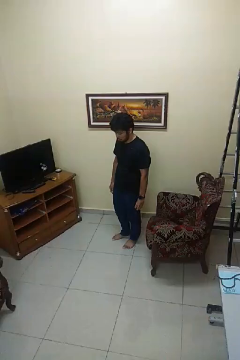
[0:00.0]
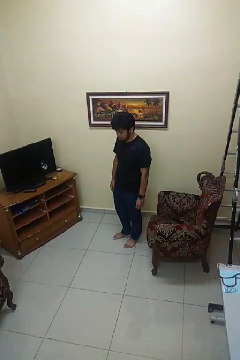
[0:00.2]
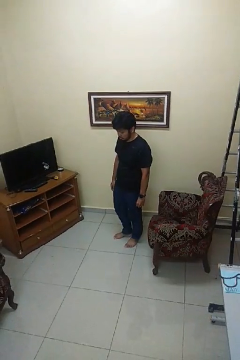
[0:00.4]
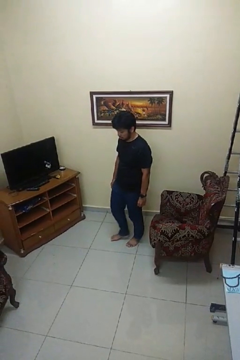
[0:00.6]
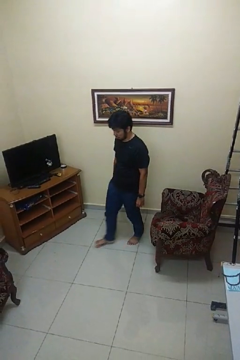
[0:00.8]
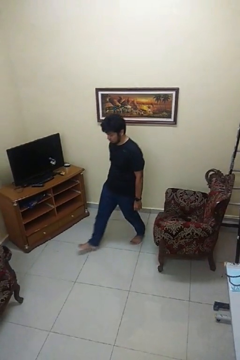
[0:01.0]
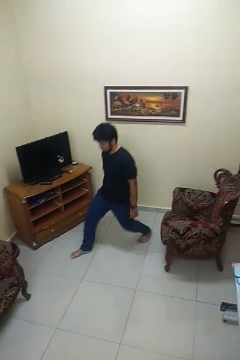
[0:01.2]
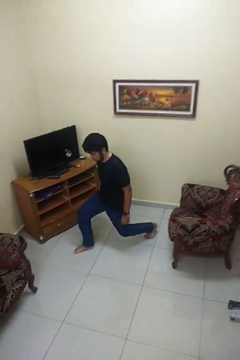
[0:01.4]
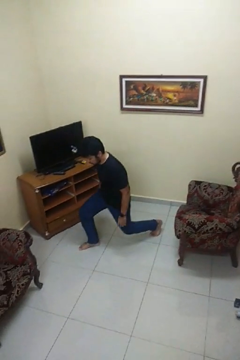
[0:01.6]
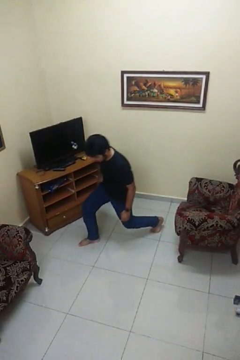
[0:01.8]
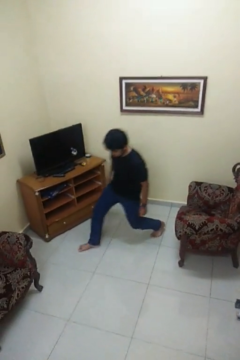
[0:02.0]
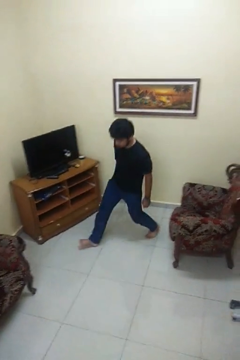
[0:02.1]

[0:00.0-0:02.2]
person exercises with lunges

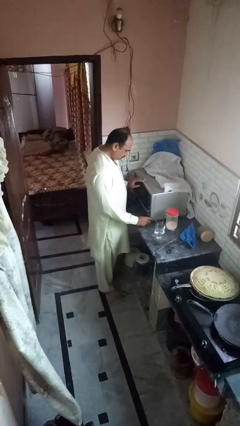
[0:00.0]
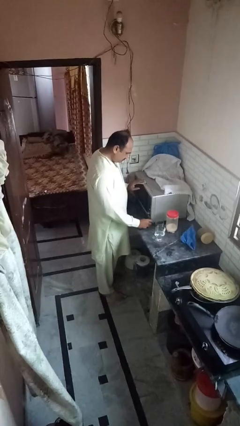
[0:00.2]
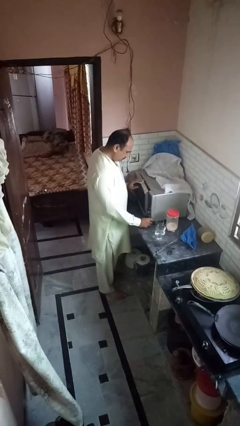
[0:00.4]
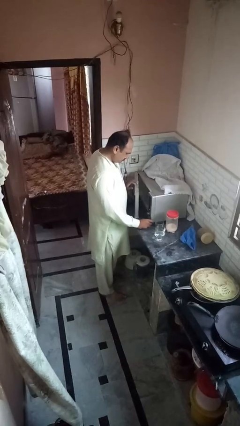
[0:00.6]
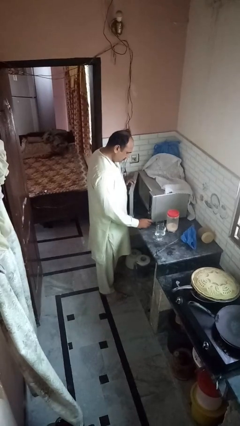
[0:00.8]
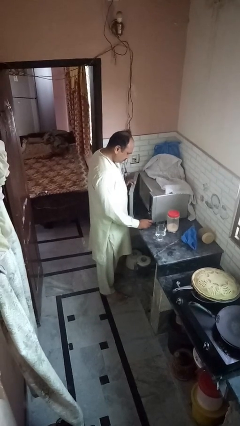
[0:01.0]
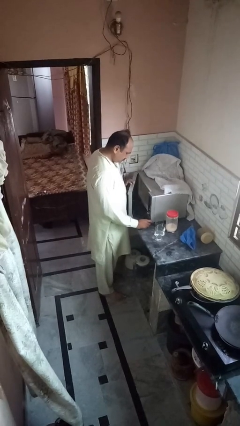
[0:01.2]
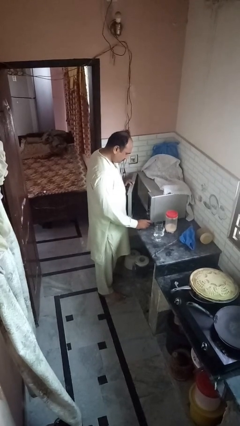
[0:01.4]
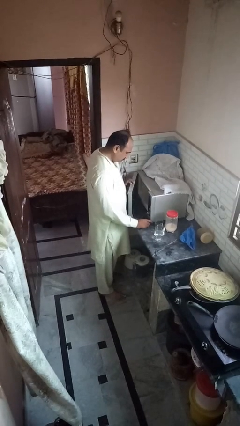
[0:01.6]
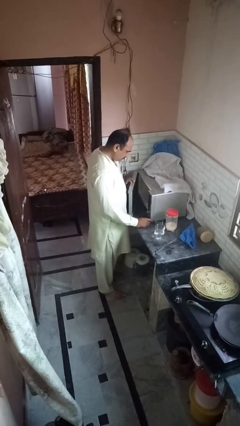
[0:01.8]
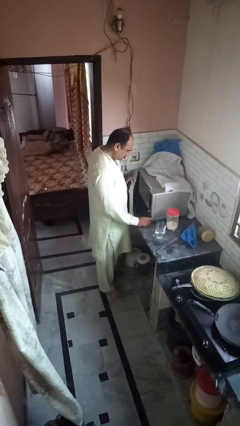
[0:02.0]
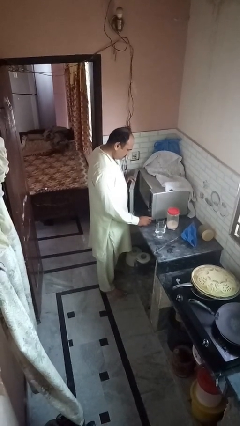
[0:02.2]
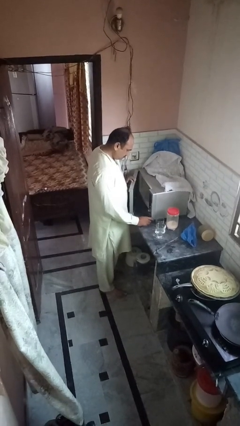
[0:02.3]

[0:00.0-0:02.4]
person opens microwave

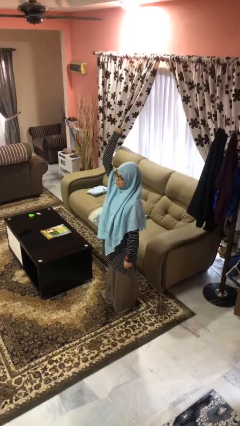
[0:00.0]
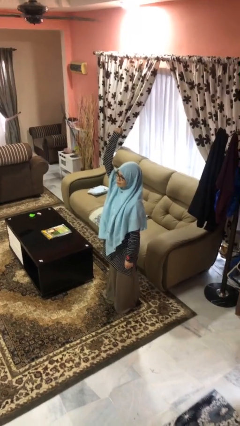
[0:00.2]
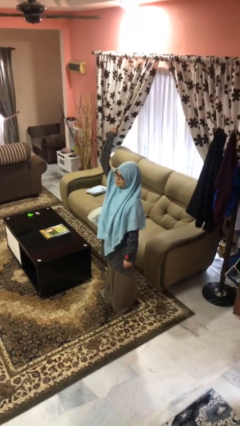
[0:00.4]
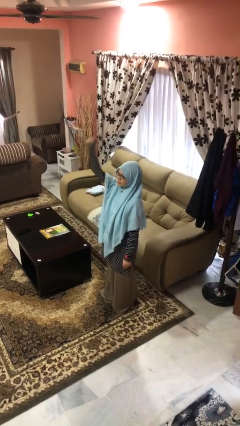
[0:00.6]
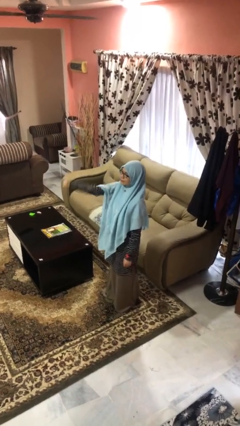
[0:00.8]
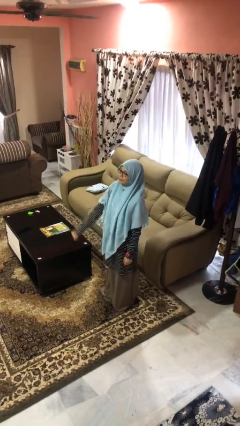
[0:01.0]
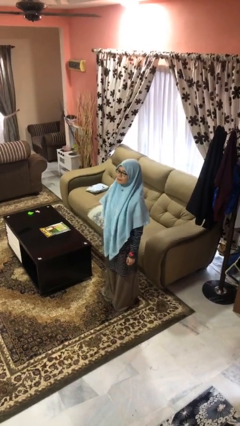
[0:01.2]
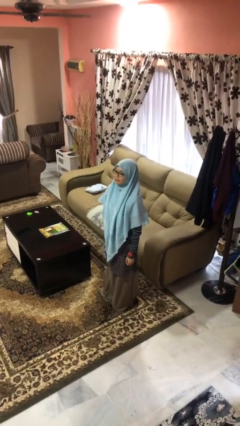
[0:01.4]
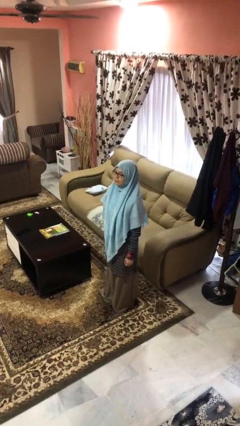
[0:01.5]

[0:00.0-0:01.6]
person gestures lower hand

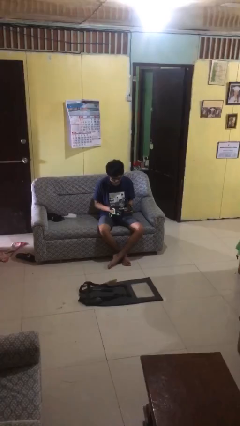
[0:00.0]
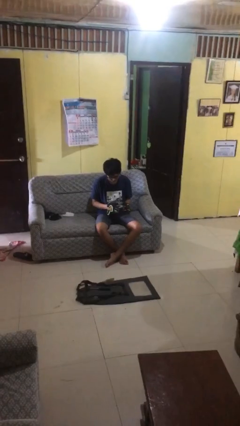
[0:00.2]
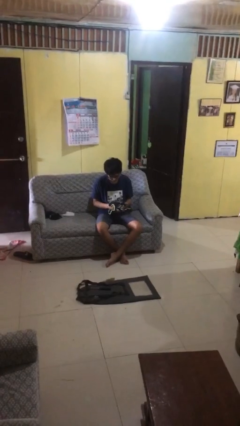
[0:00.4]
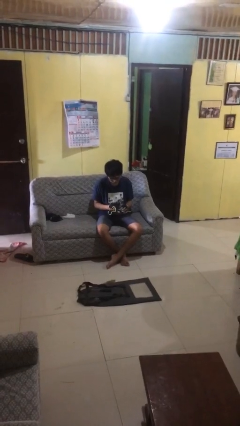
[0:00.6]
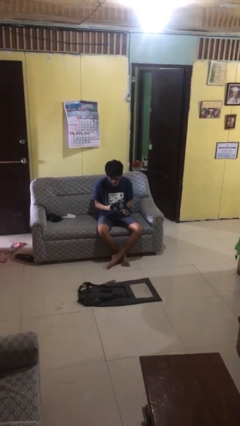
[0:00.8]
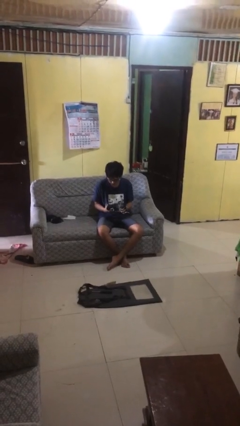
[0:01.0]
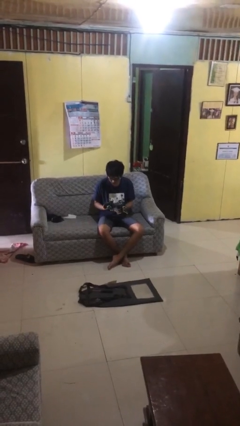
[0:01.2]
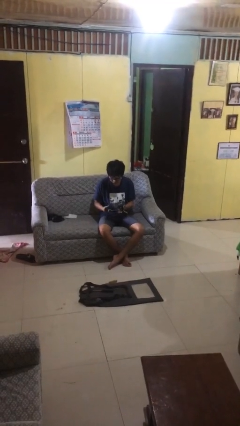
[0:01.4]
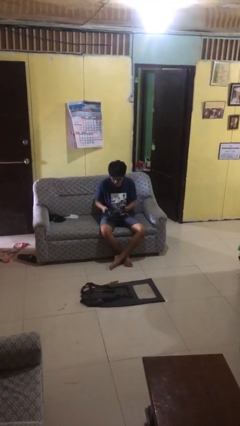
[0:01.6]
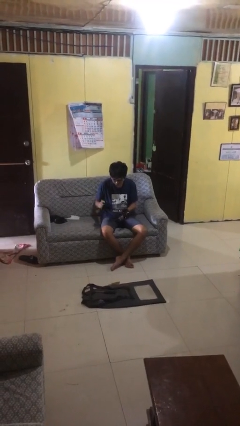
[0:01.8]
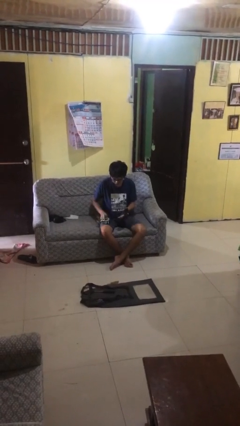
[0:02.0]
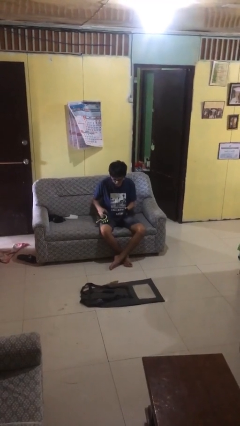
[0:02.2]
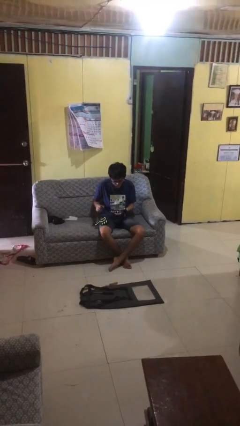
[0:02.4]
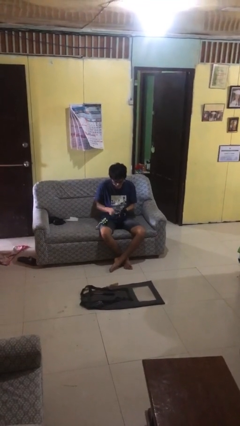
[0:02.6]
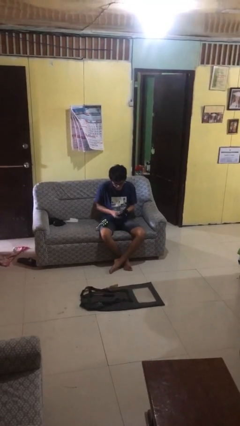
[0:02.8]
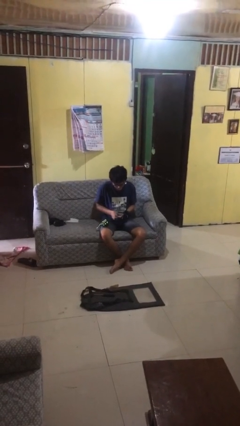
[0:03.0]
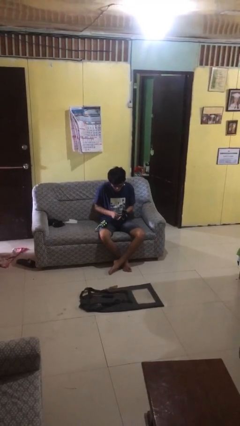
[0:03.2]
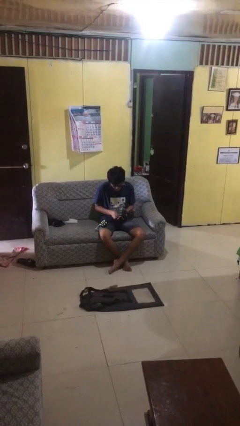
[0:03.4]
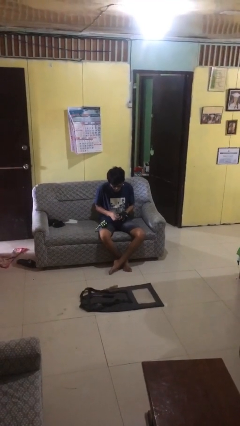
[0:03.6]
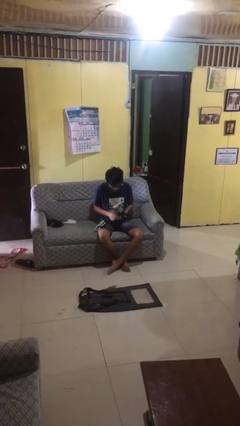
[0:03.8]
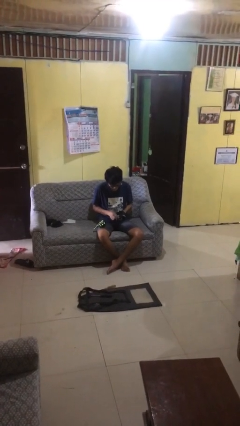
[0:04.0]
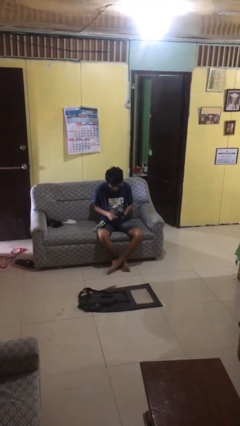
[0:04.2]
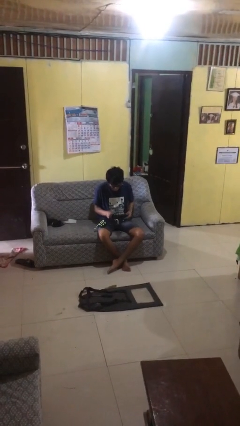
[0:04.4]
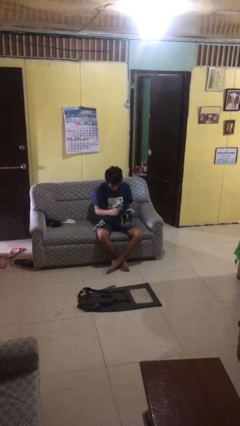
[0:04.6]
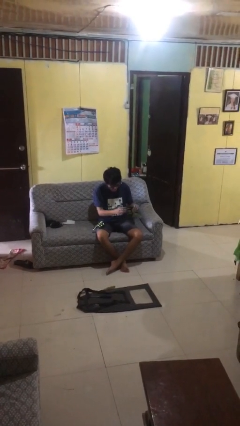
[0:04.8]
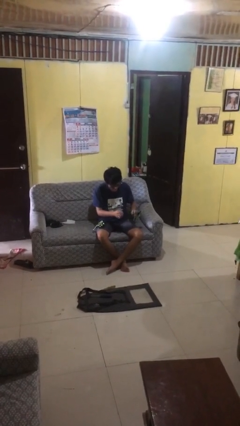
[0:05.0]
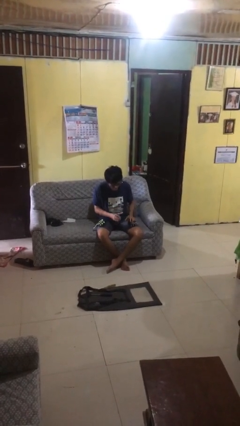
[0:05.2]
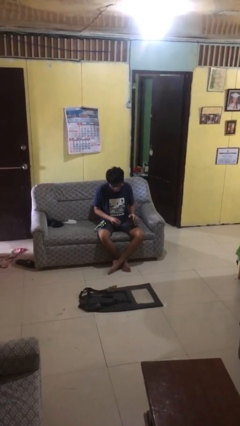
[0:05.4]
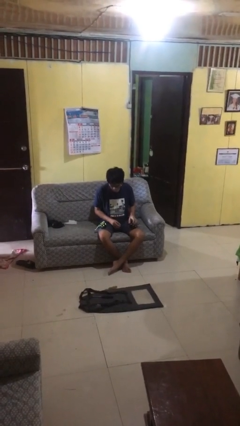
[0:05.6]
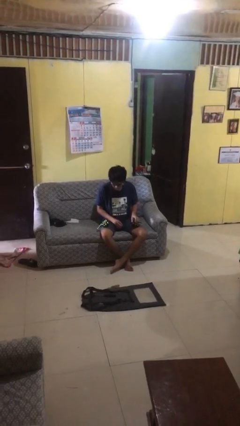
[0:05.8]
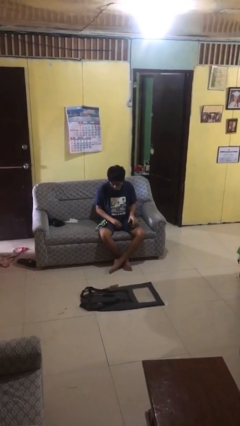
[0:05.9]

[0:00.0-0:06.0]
person takes off gloves

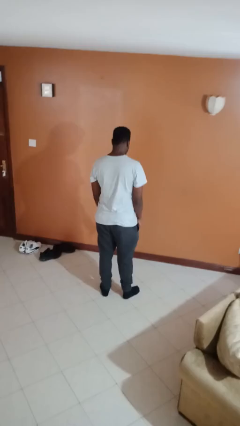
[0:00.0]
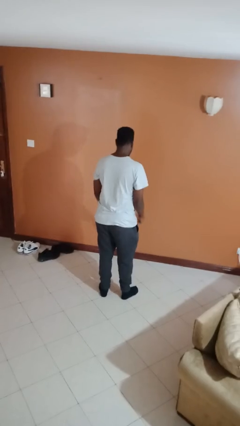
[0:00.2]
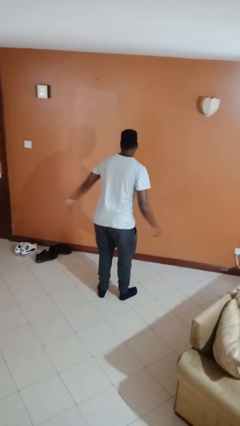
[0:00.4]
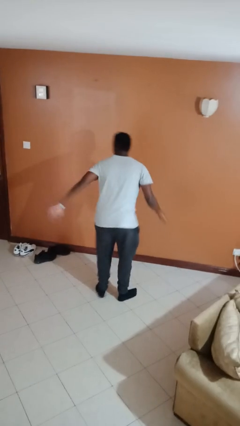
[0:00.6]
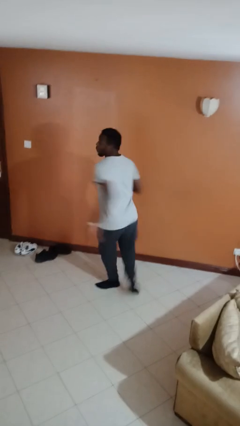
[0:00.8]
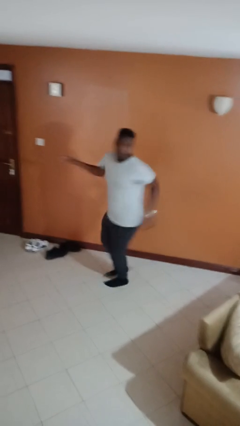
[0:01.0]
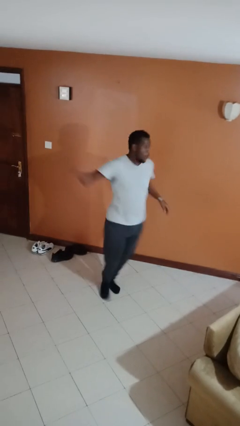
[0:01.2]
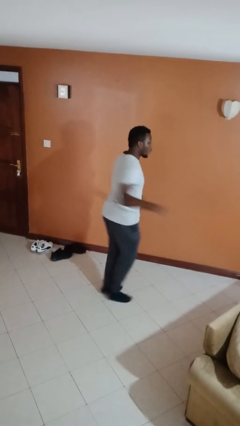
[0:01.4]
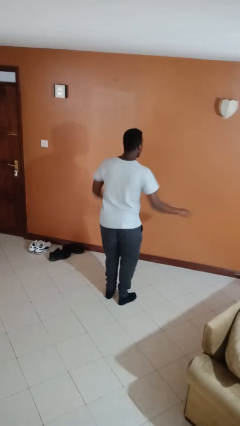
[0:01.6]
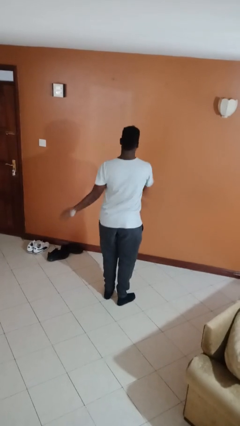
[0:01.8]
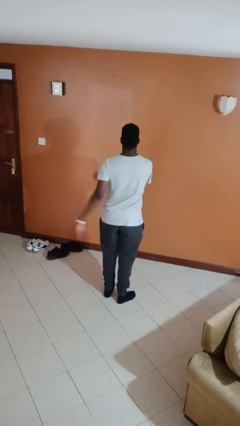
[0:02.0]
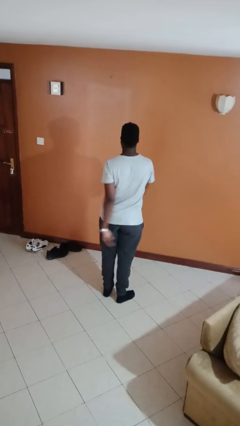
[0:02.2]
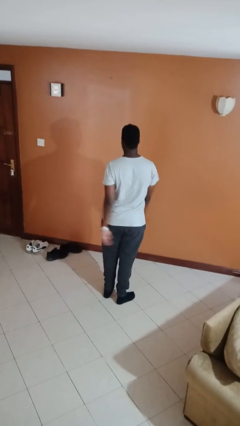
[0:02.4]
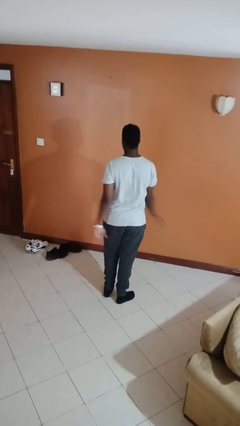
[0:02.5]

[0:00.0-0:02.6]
person twirls

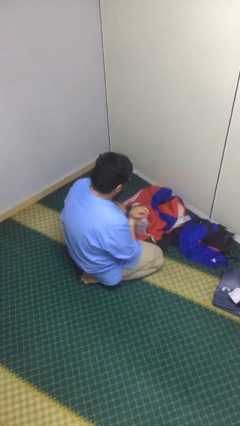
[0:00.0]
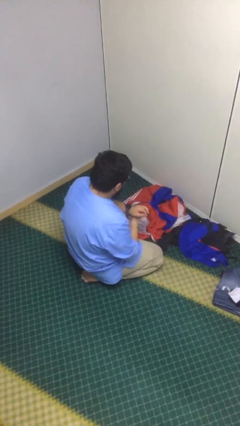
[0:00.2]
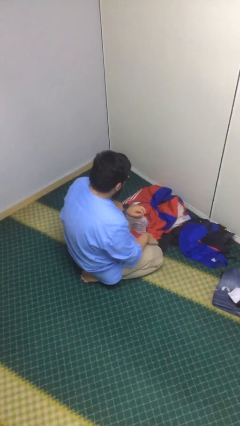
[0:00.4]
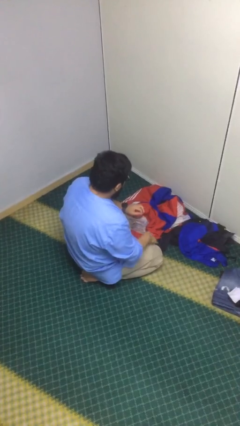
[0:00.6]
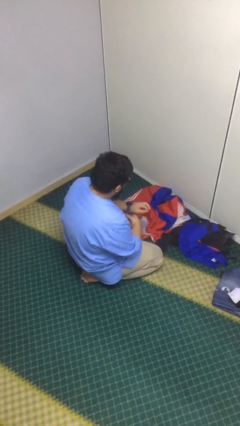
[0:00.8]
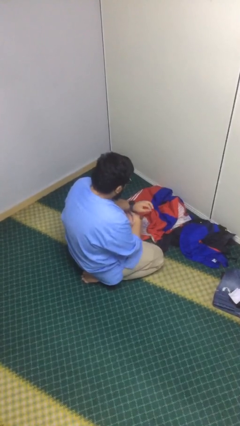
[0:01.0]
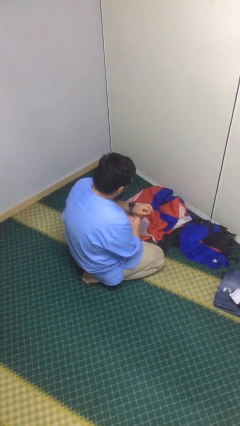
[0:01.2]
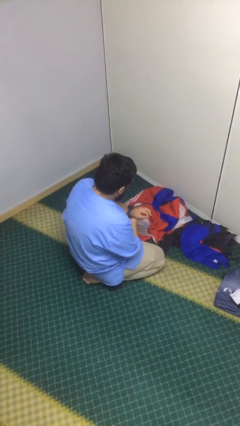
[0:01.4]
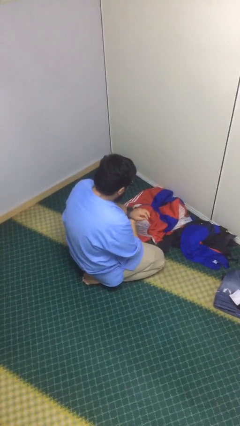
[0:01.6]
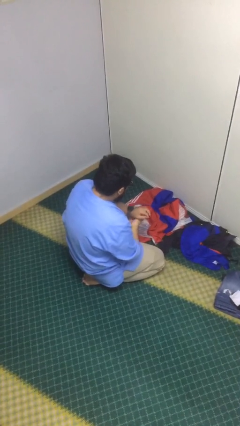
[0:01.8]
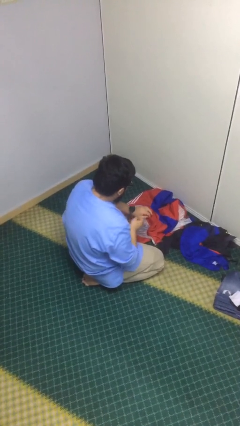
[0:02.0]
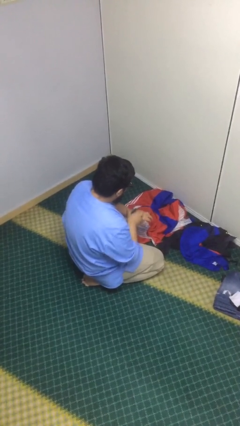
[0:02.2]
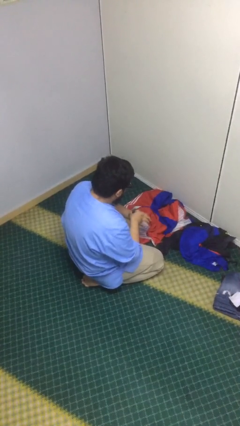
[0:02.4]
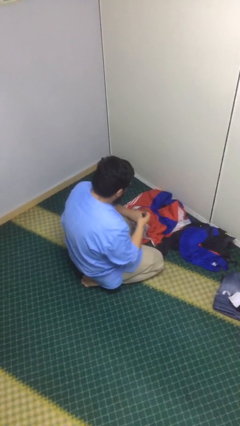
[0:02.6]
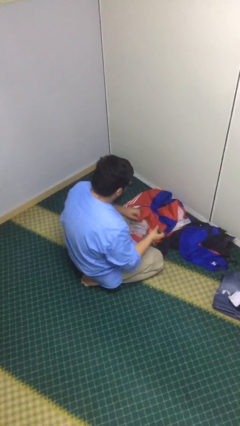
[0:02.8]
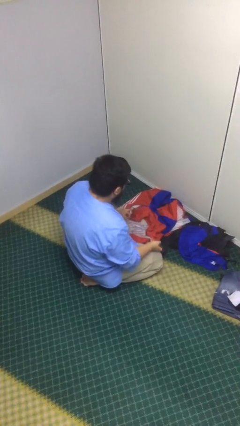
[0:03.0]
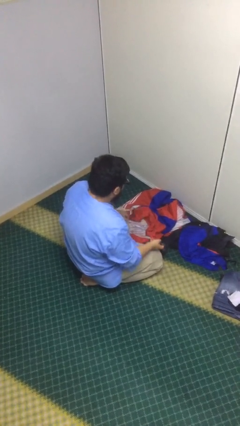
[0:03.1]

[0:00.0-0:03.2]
person takes off wristwatch
